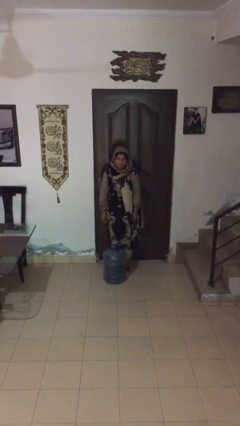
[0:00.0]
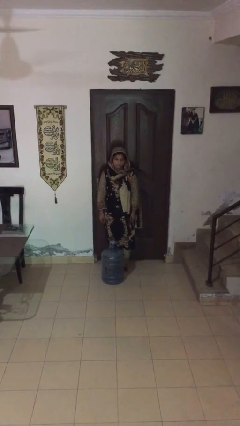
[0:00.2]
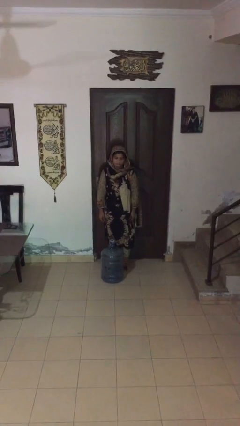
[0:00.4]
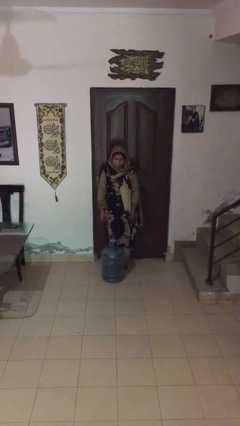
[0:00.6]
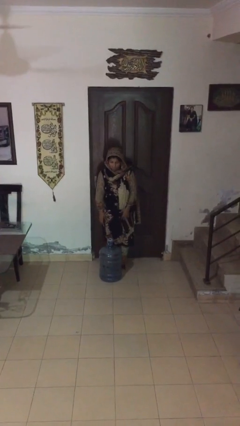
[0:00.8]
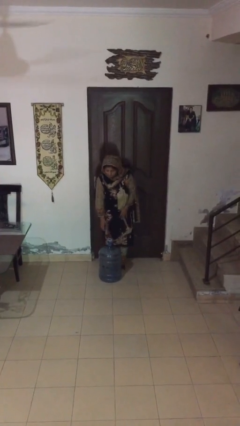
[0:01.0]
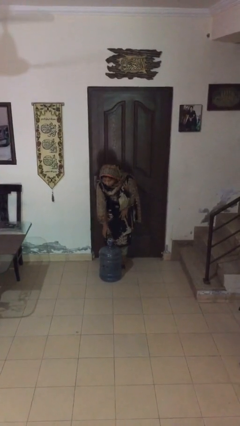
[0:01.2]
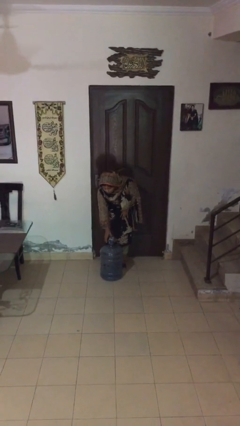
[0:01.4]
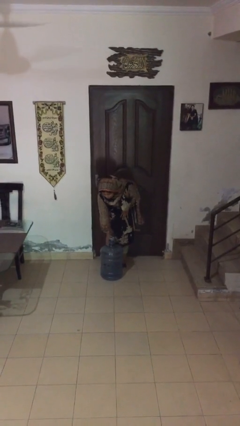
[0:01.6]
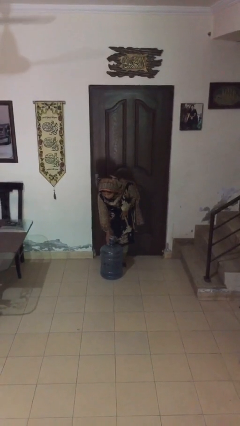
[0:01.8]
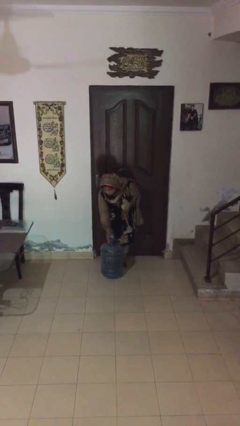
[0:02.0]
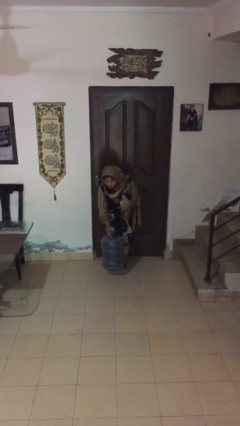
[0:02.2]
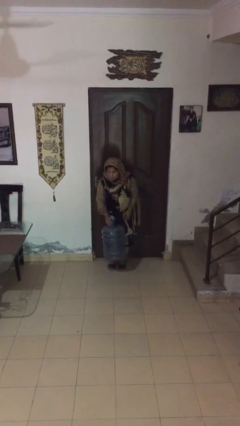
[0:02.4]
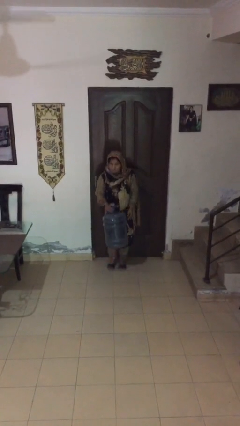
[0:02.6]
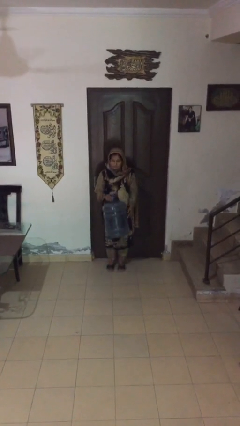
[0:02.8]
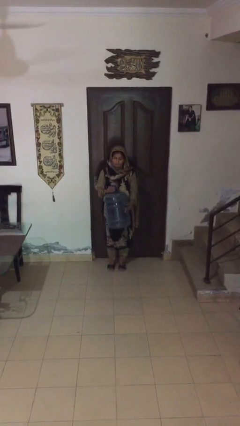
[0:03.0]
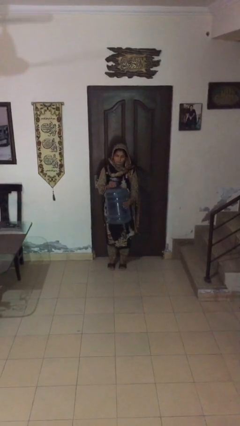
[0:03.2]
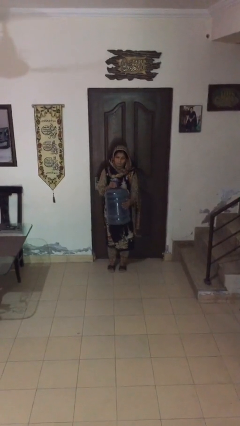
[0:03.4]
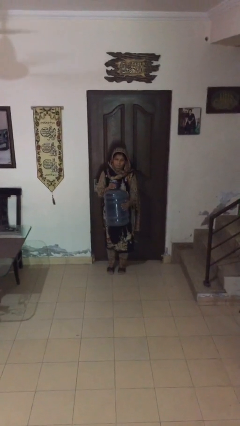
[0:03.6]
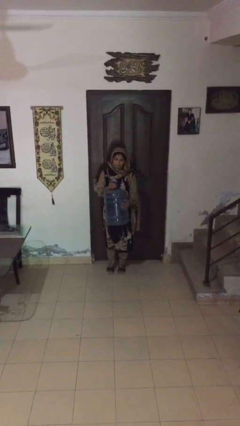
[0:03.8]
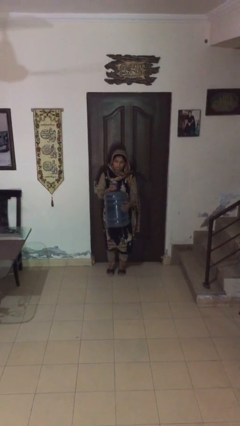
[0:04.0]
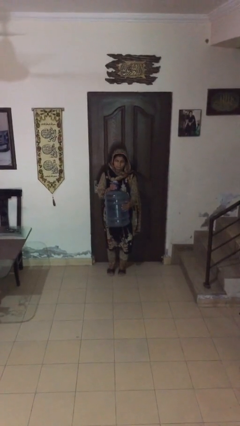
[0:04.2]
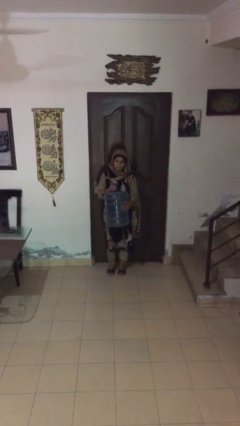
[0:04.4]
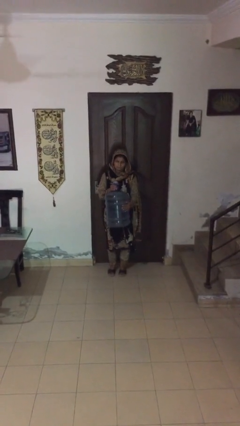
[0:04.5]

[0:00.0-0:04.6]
person picks up object from floor

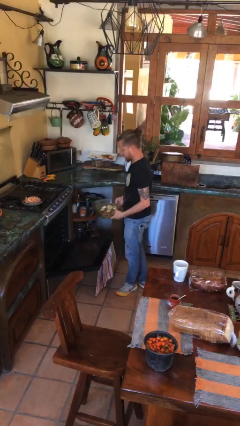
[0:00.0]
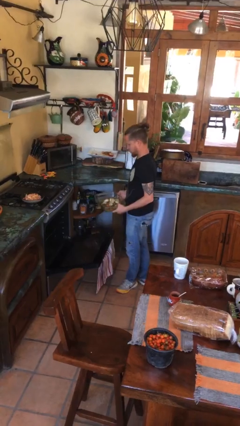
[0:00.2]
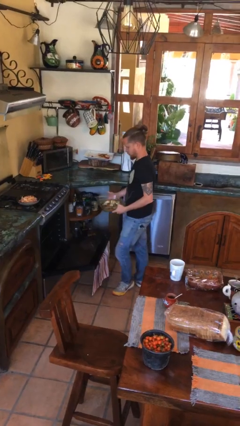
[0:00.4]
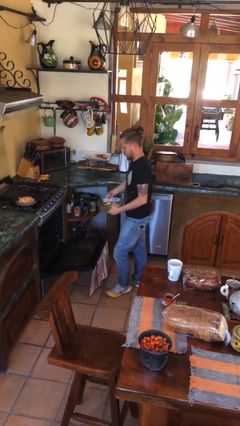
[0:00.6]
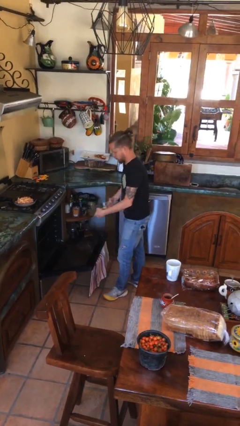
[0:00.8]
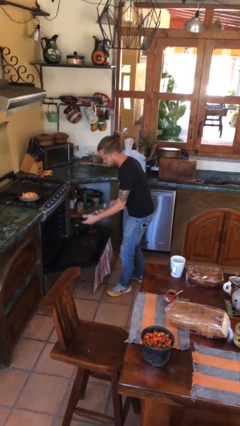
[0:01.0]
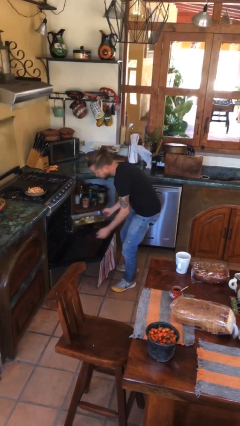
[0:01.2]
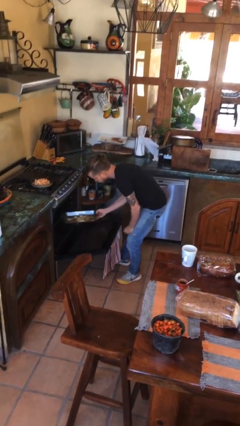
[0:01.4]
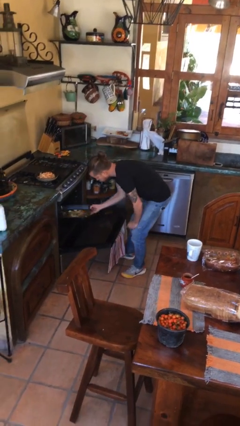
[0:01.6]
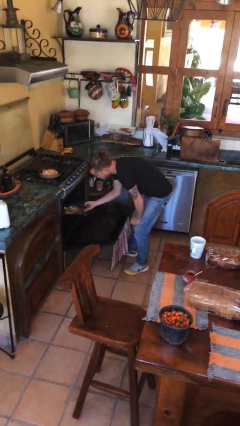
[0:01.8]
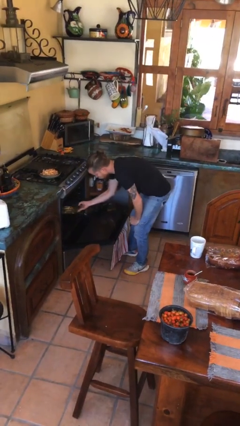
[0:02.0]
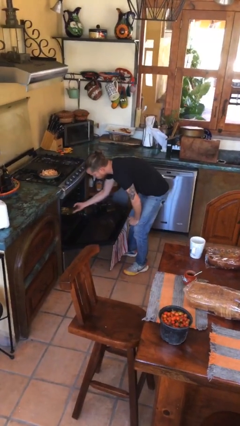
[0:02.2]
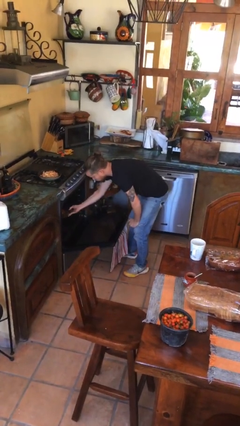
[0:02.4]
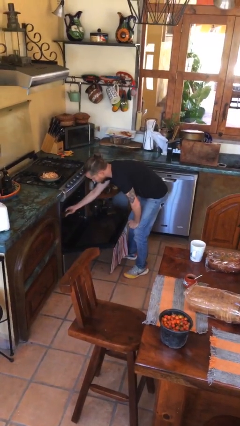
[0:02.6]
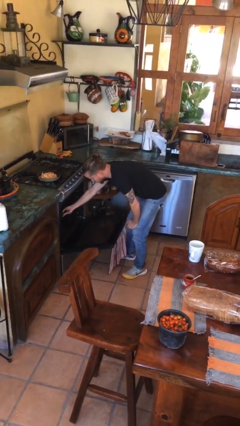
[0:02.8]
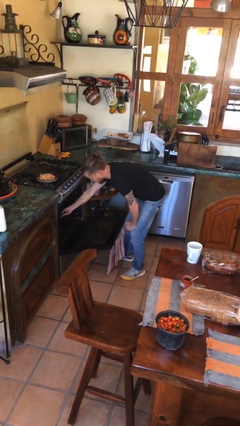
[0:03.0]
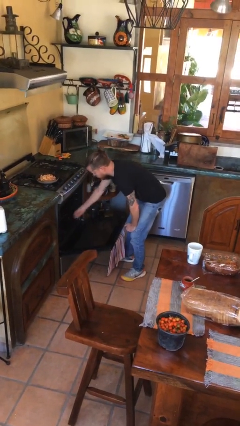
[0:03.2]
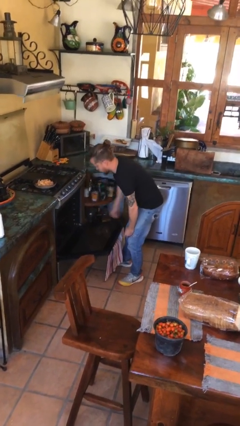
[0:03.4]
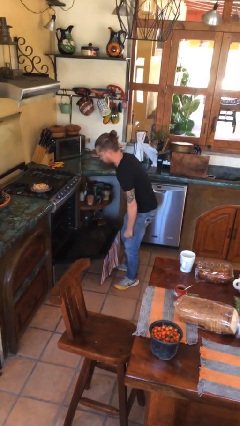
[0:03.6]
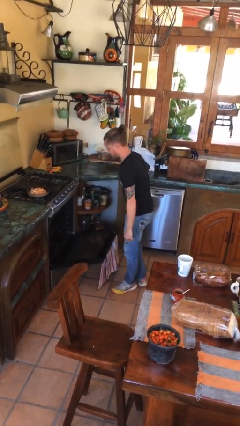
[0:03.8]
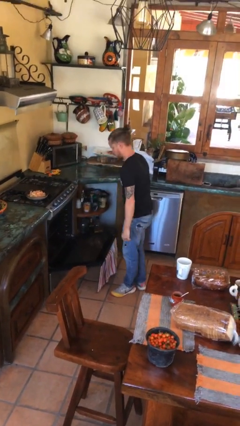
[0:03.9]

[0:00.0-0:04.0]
person puts object into oven

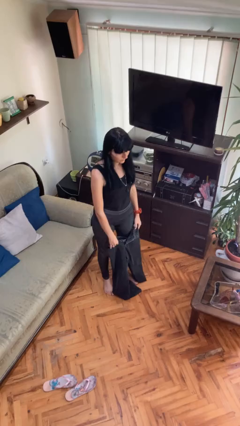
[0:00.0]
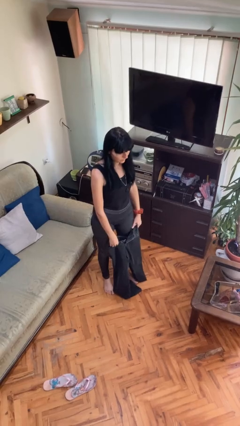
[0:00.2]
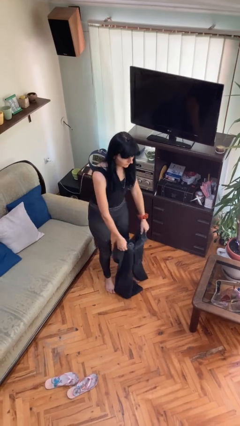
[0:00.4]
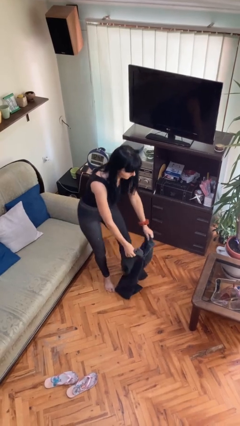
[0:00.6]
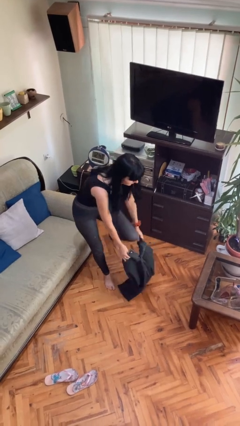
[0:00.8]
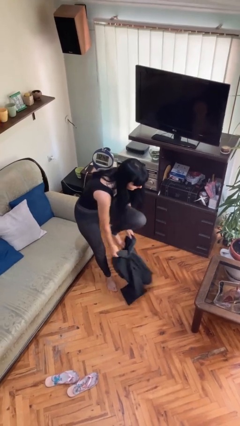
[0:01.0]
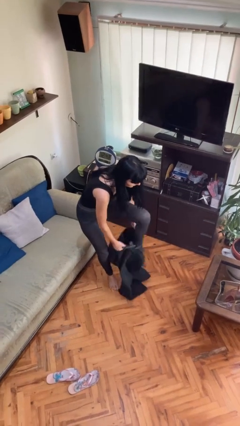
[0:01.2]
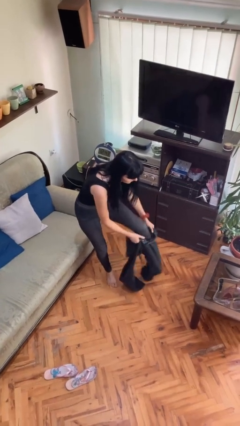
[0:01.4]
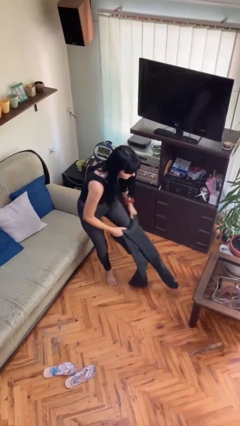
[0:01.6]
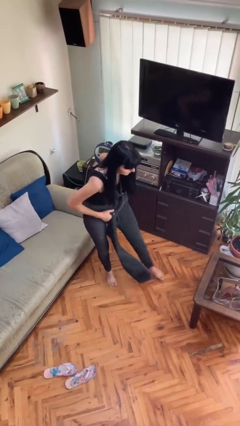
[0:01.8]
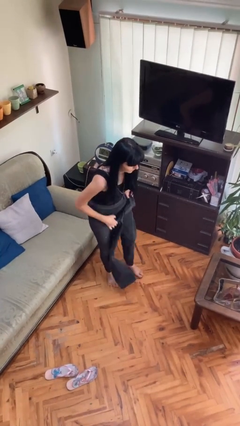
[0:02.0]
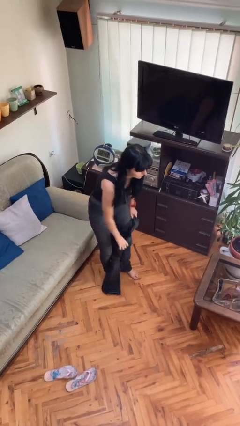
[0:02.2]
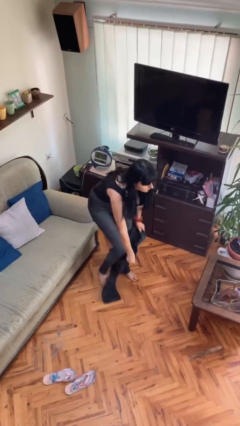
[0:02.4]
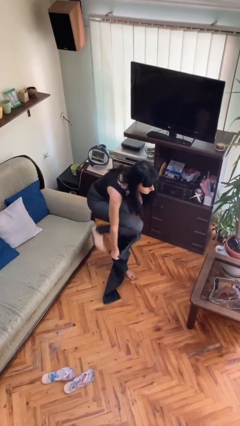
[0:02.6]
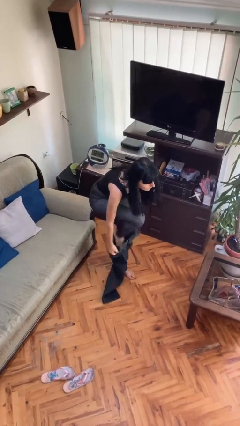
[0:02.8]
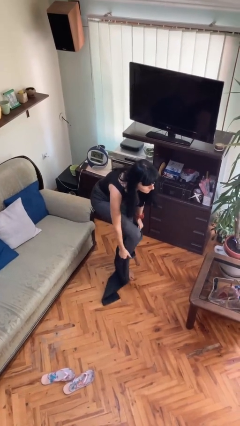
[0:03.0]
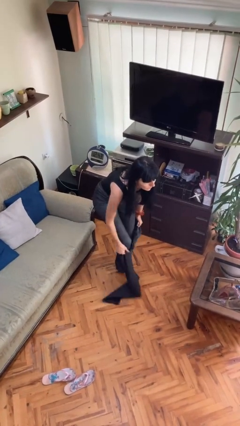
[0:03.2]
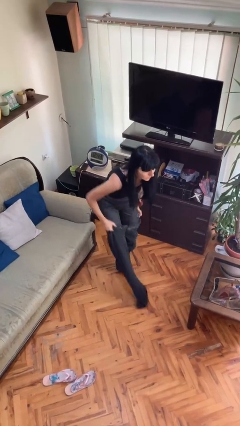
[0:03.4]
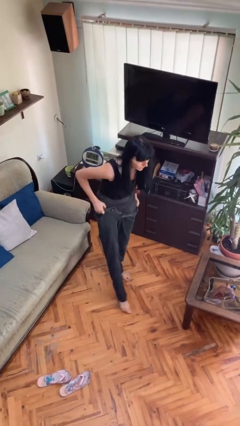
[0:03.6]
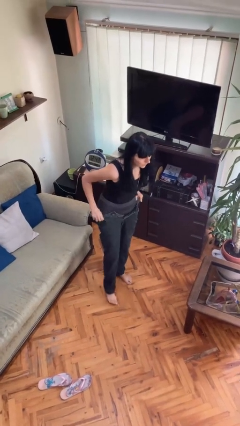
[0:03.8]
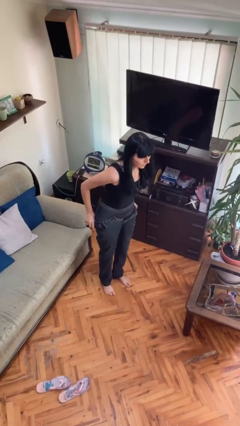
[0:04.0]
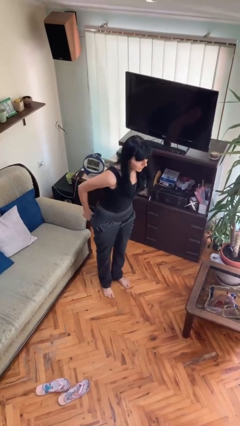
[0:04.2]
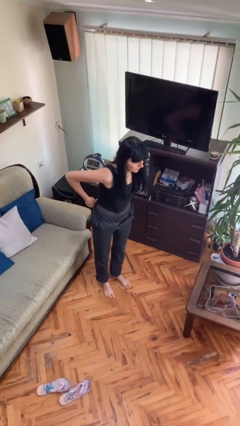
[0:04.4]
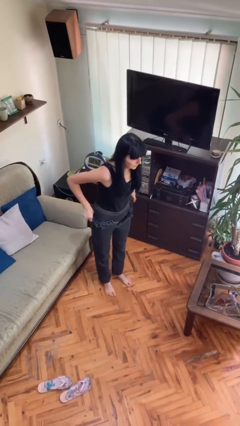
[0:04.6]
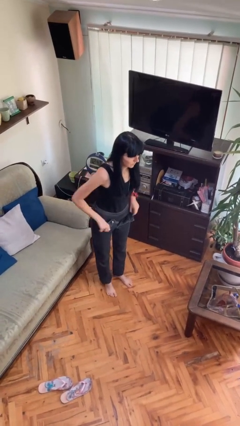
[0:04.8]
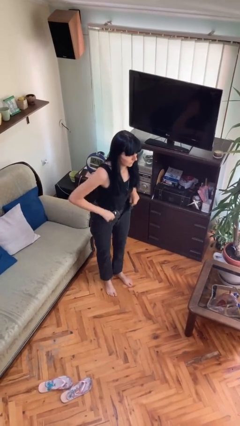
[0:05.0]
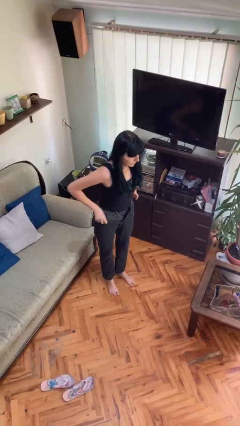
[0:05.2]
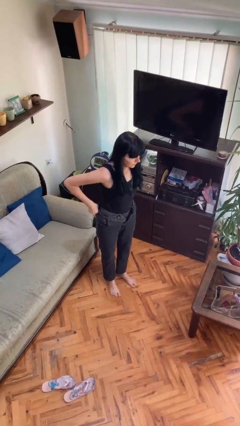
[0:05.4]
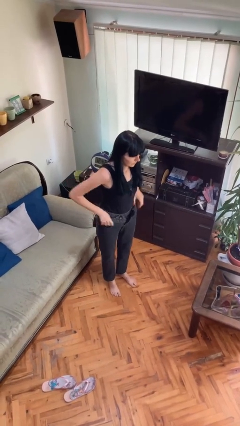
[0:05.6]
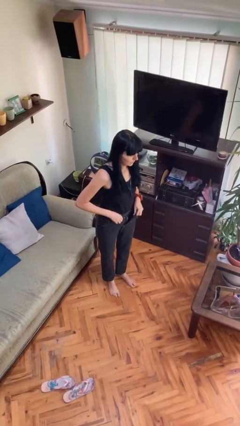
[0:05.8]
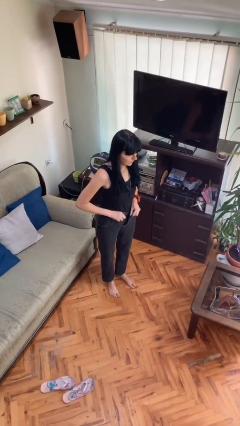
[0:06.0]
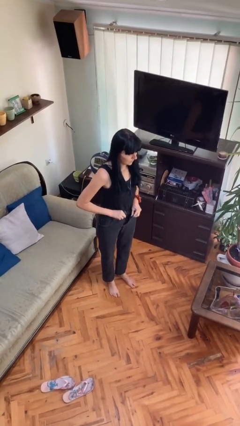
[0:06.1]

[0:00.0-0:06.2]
person puts on pants

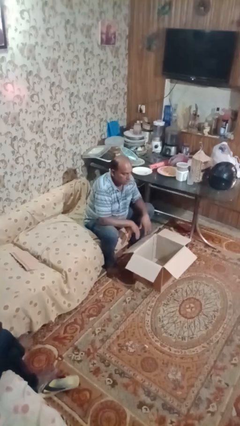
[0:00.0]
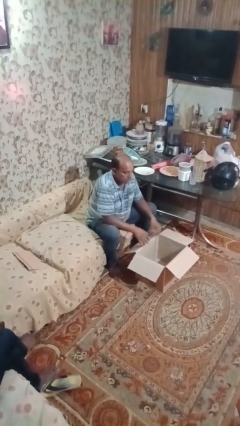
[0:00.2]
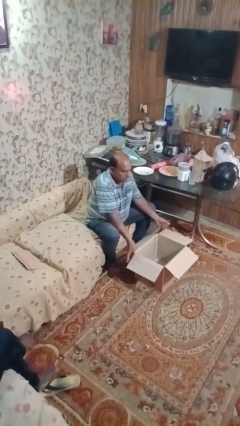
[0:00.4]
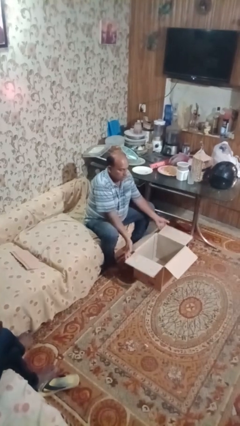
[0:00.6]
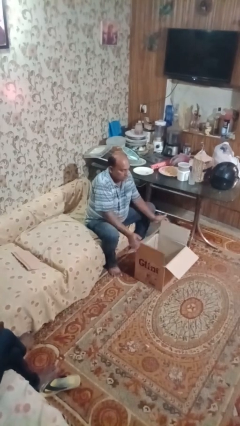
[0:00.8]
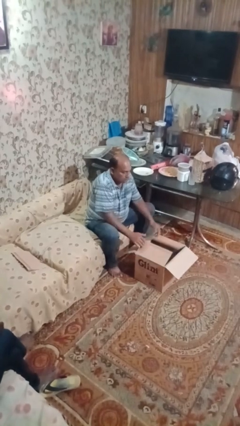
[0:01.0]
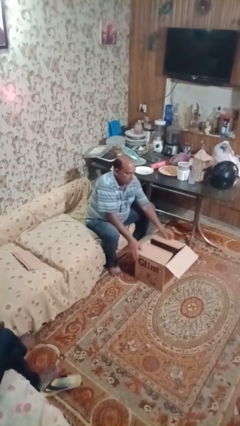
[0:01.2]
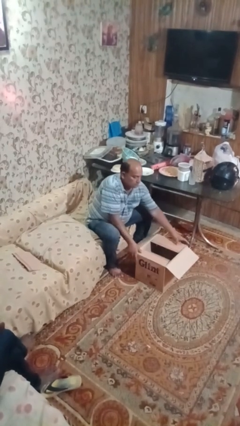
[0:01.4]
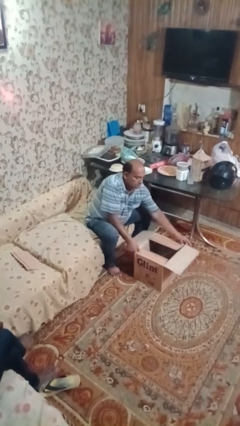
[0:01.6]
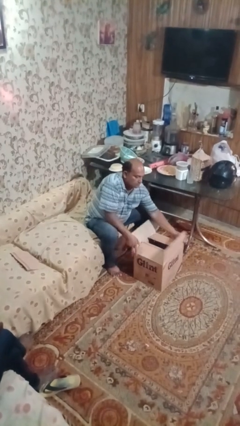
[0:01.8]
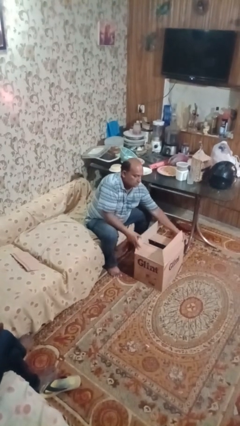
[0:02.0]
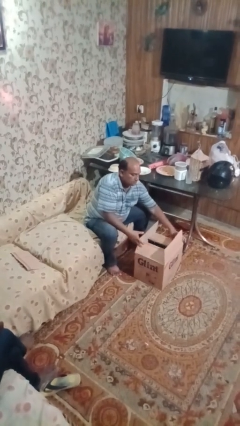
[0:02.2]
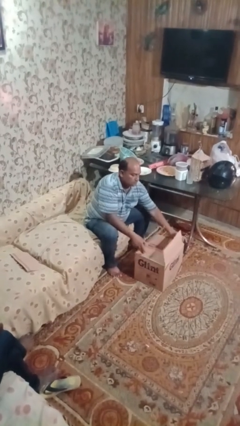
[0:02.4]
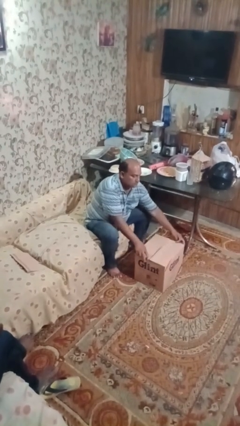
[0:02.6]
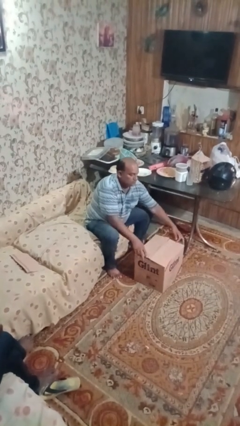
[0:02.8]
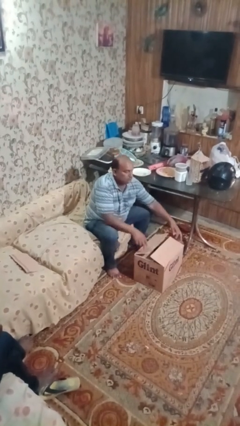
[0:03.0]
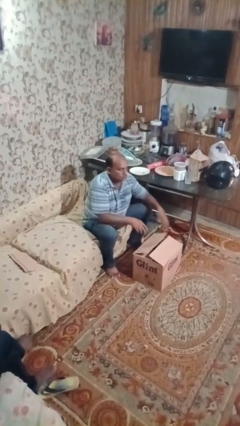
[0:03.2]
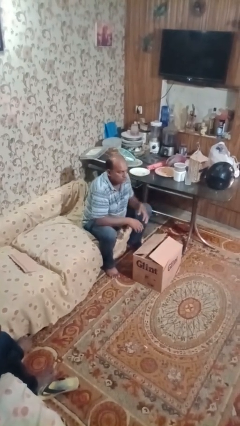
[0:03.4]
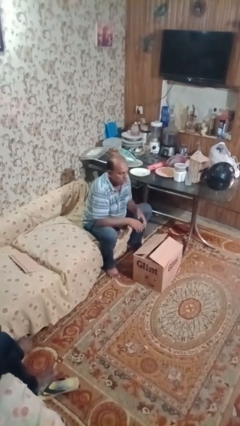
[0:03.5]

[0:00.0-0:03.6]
person closes box
